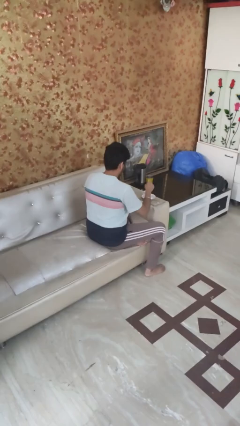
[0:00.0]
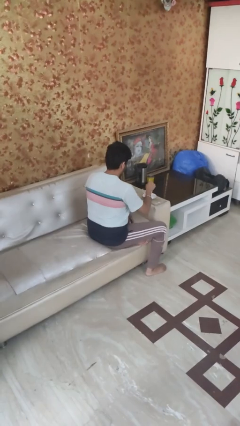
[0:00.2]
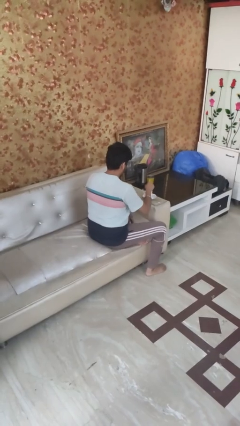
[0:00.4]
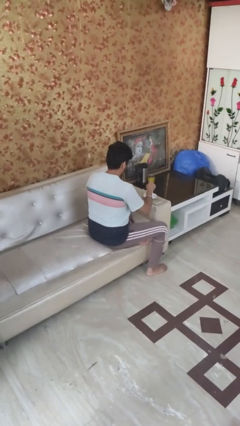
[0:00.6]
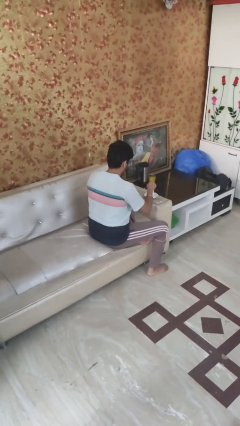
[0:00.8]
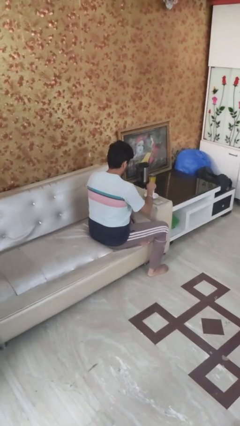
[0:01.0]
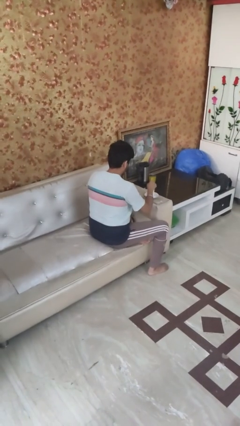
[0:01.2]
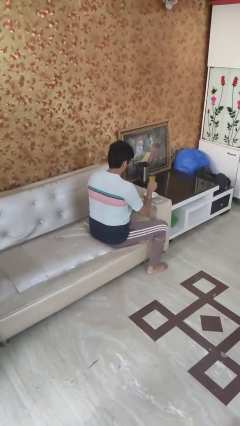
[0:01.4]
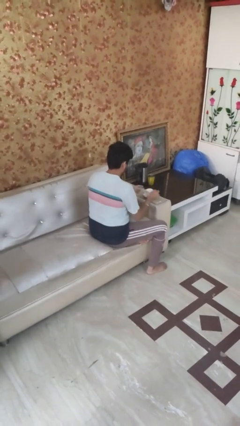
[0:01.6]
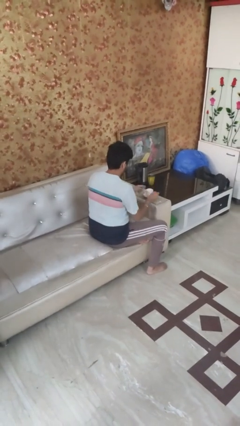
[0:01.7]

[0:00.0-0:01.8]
person stirs mug

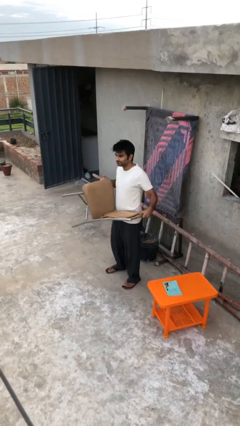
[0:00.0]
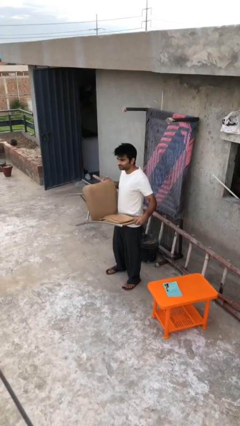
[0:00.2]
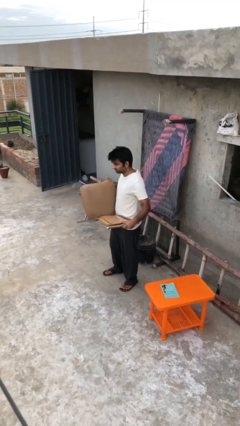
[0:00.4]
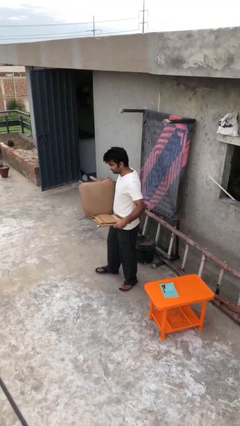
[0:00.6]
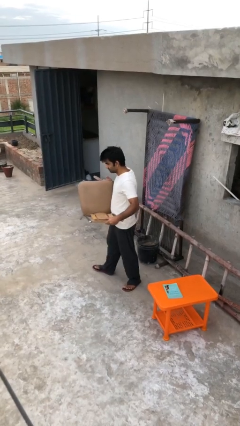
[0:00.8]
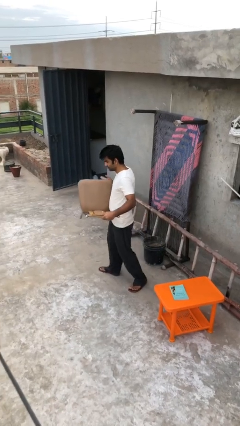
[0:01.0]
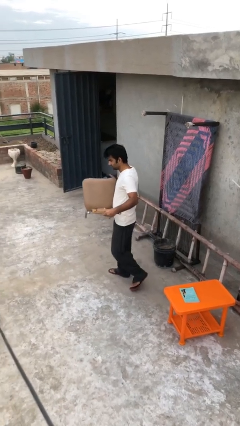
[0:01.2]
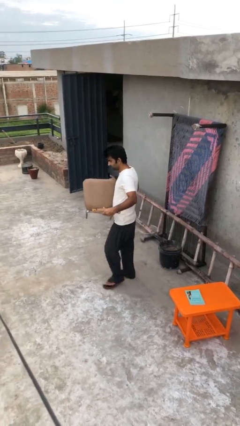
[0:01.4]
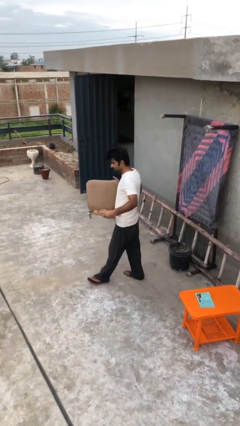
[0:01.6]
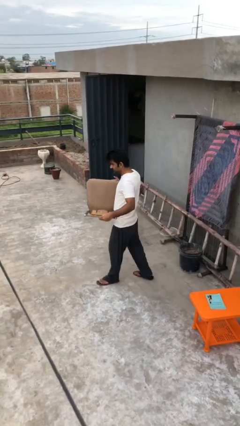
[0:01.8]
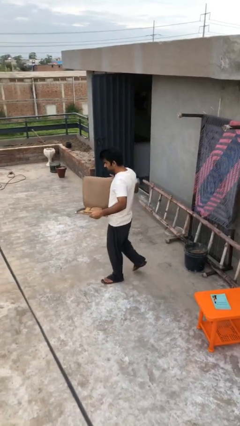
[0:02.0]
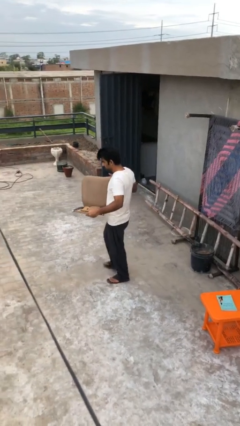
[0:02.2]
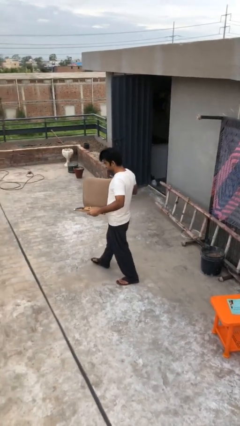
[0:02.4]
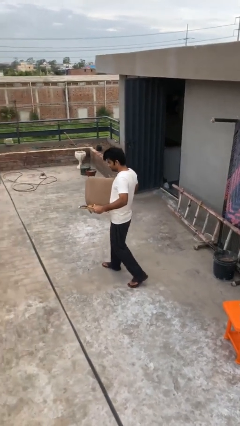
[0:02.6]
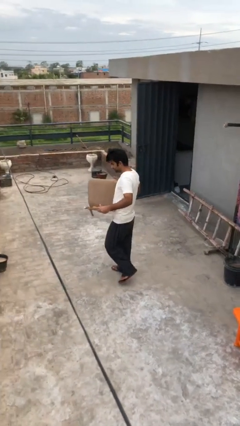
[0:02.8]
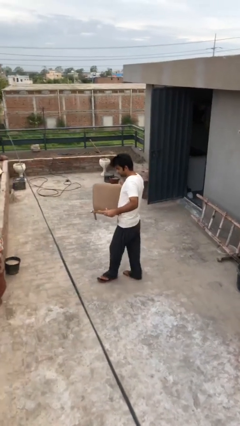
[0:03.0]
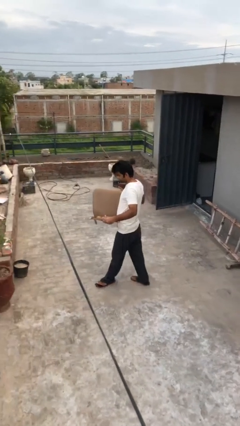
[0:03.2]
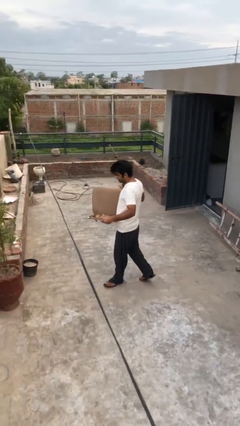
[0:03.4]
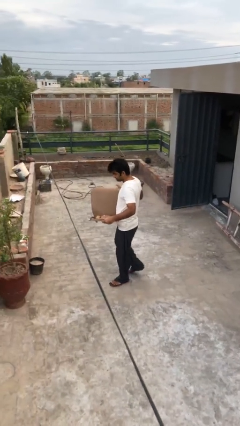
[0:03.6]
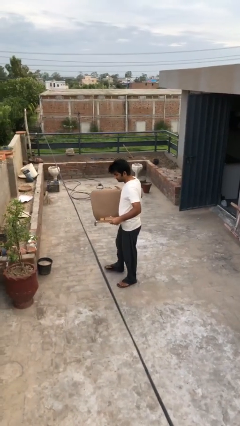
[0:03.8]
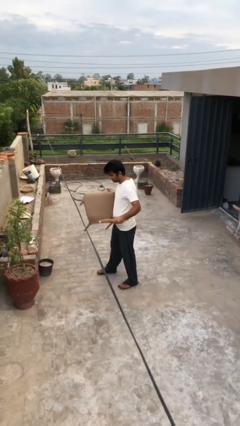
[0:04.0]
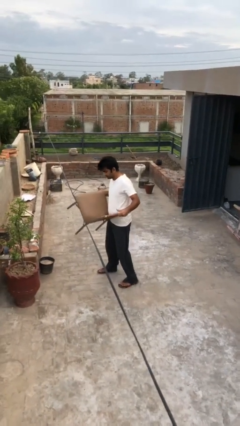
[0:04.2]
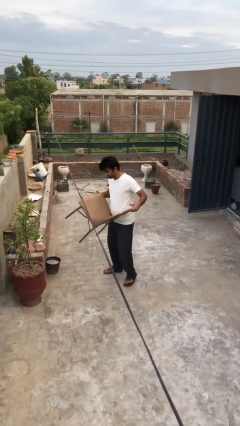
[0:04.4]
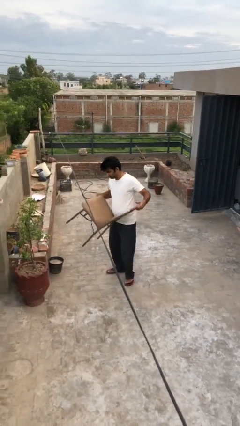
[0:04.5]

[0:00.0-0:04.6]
person carries heavy object

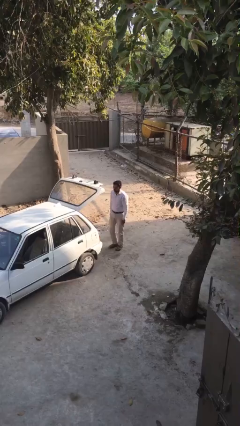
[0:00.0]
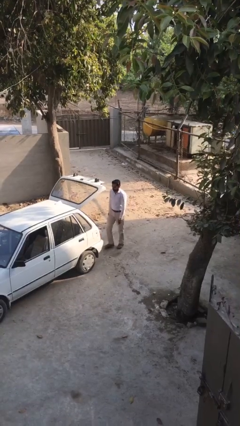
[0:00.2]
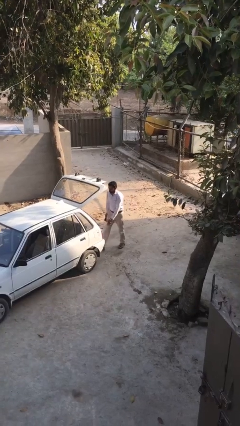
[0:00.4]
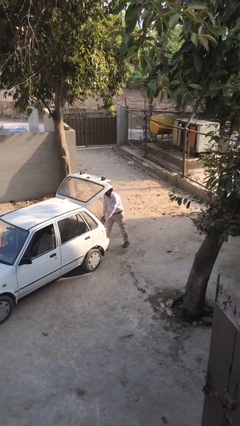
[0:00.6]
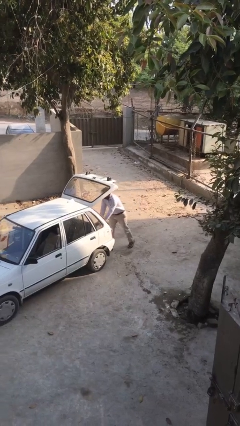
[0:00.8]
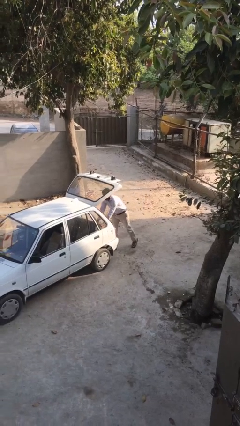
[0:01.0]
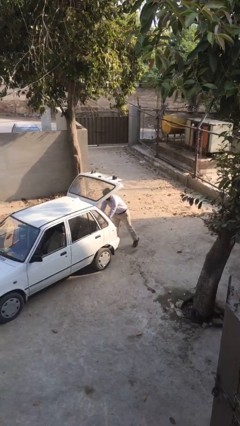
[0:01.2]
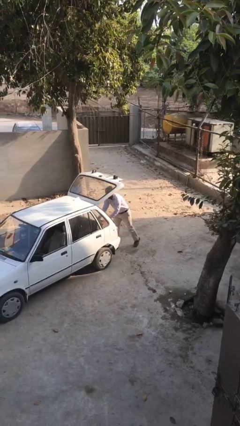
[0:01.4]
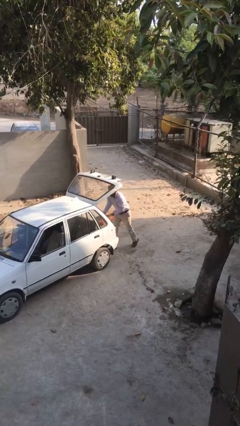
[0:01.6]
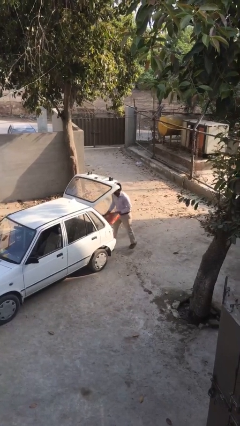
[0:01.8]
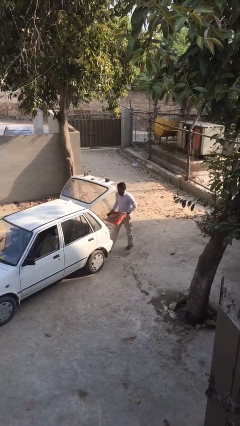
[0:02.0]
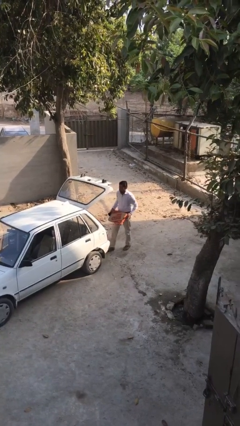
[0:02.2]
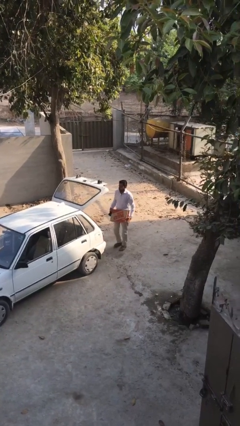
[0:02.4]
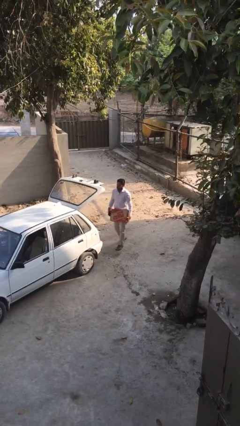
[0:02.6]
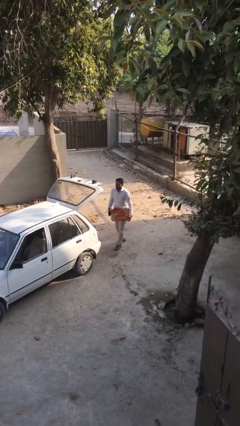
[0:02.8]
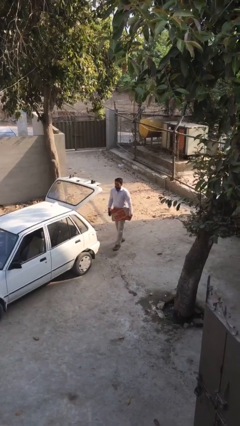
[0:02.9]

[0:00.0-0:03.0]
person unloads car

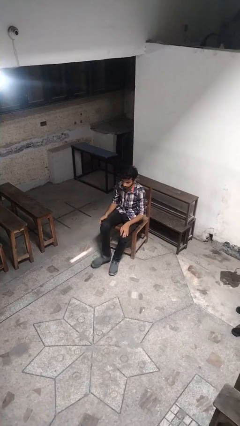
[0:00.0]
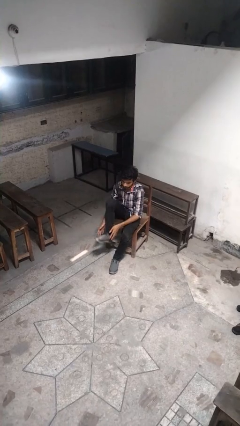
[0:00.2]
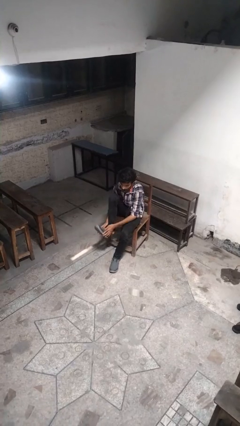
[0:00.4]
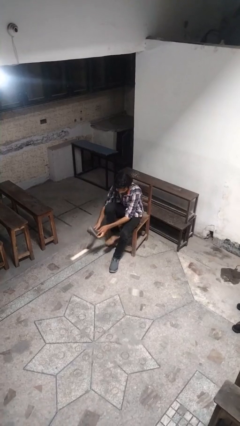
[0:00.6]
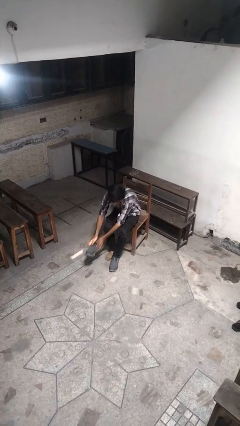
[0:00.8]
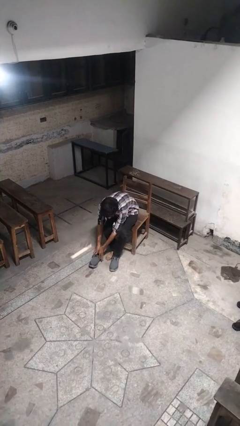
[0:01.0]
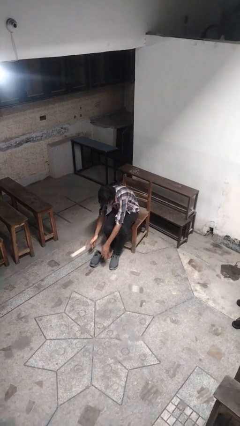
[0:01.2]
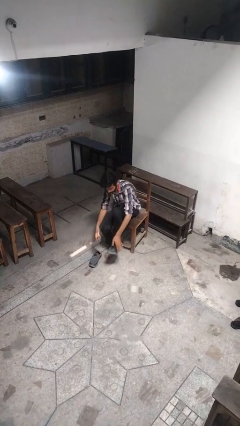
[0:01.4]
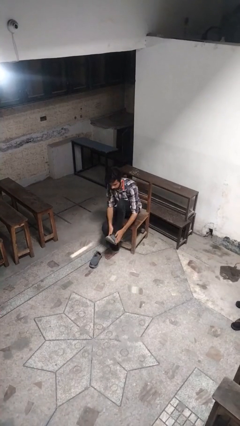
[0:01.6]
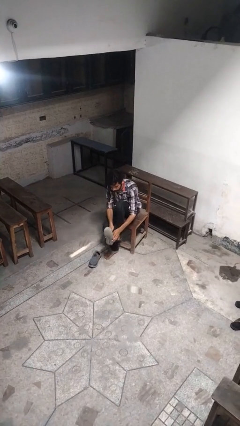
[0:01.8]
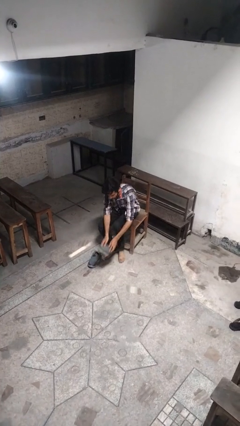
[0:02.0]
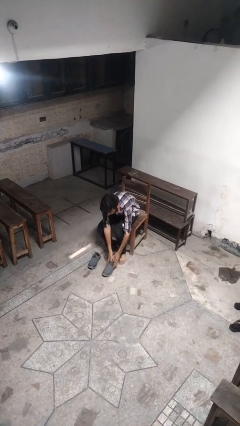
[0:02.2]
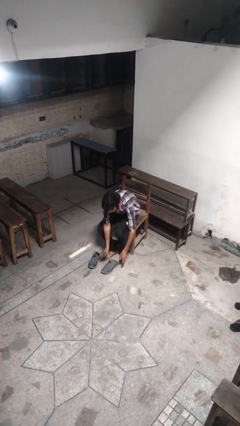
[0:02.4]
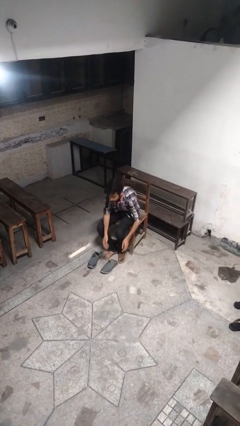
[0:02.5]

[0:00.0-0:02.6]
person takes off shoes

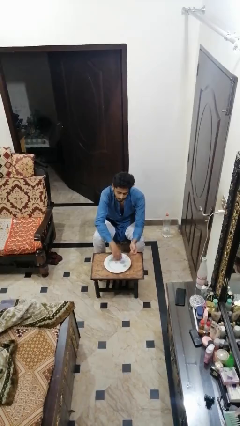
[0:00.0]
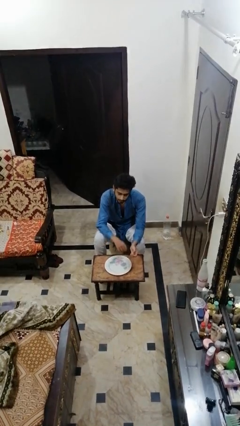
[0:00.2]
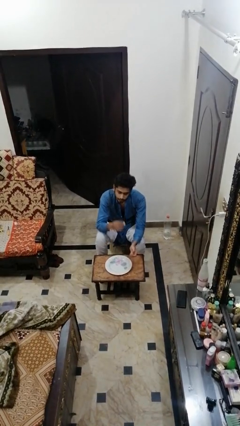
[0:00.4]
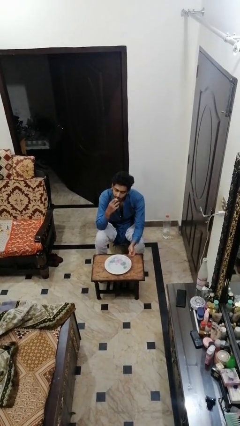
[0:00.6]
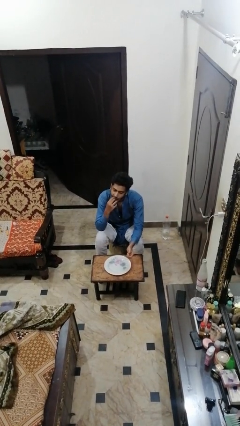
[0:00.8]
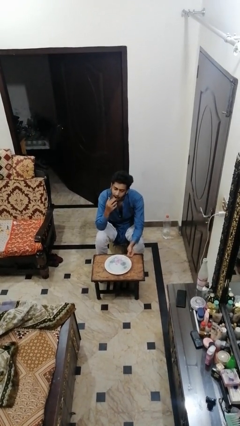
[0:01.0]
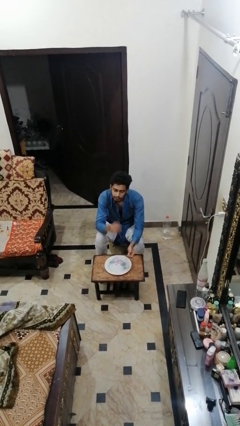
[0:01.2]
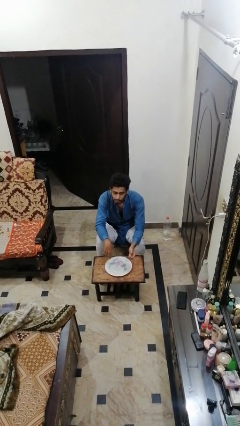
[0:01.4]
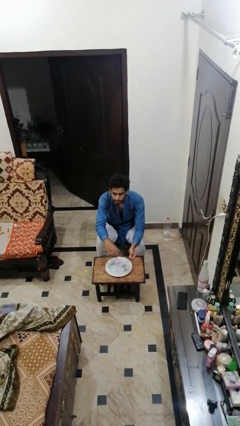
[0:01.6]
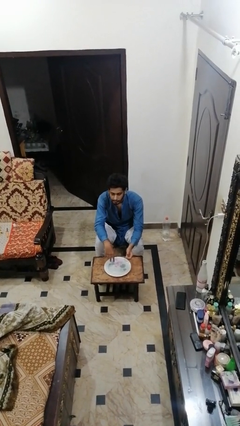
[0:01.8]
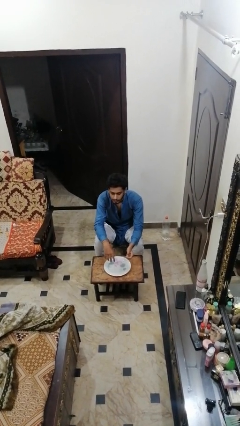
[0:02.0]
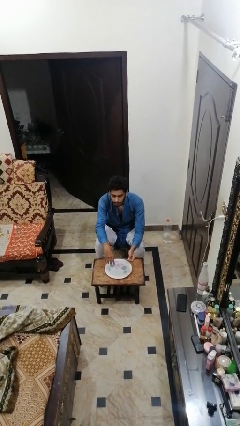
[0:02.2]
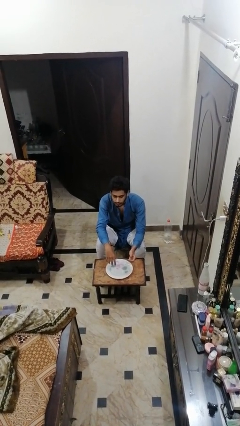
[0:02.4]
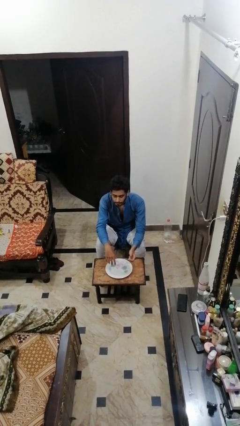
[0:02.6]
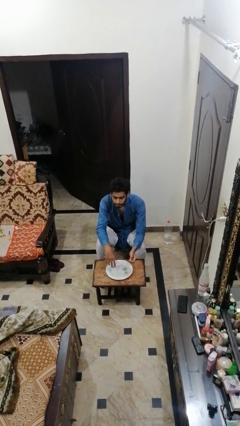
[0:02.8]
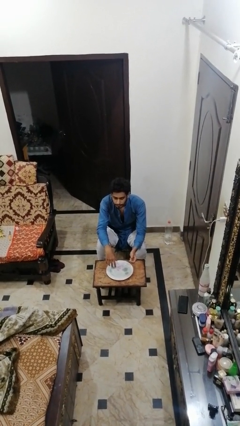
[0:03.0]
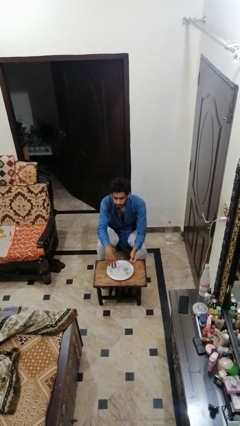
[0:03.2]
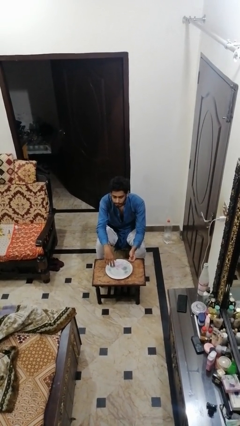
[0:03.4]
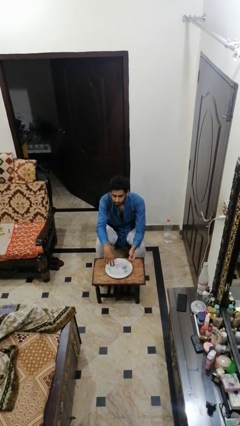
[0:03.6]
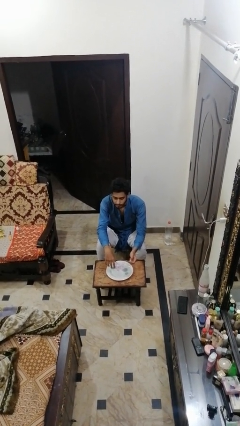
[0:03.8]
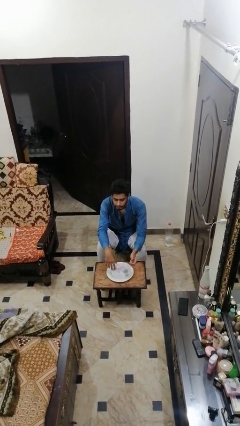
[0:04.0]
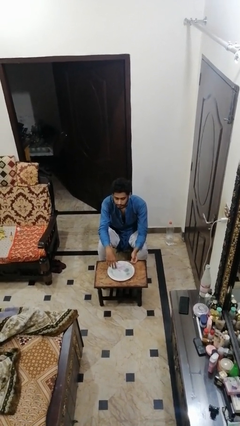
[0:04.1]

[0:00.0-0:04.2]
person eats with hands

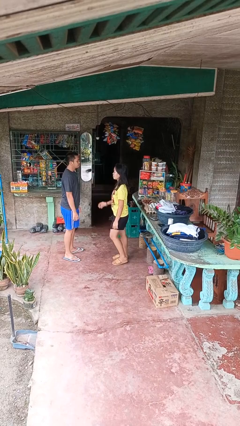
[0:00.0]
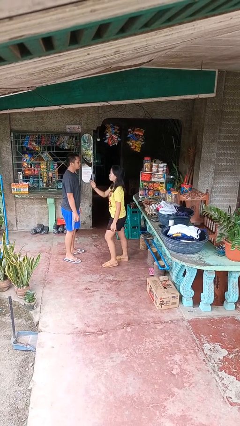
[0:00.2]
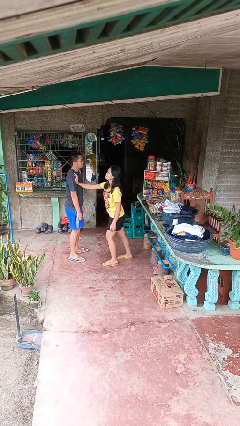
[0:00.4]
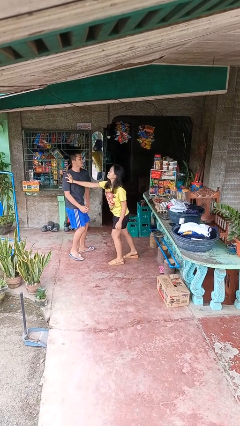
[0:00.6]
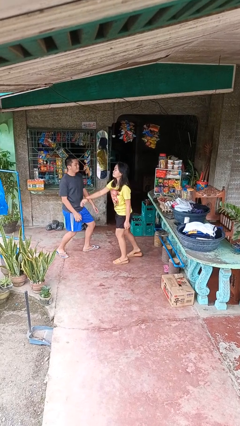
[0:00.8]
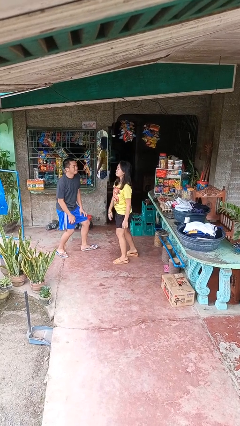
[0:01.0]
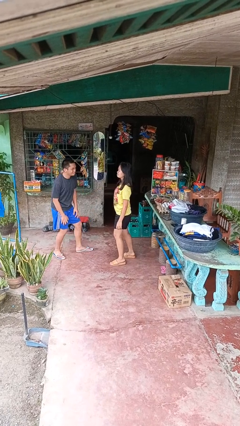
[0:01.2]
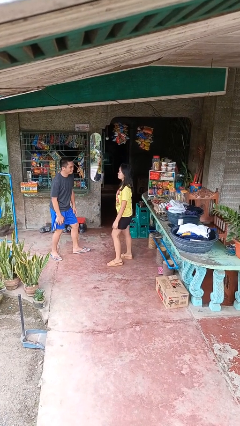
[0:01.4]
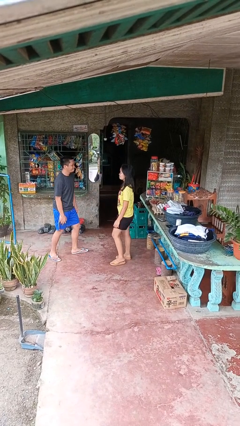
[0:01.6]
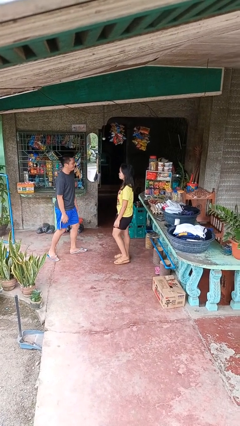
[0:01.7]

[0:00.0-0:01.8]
person shoves person
